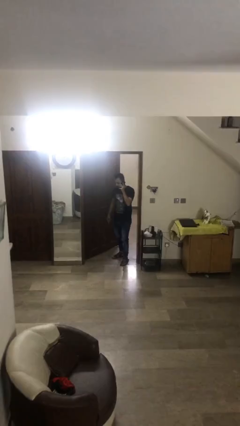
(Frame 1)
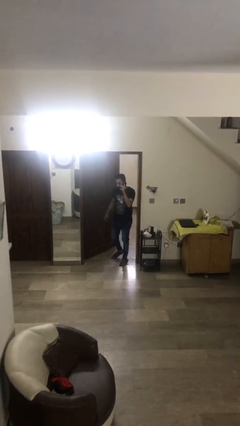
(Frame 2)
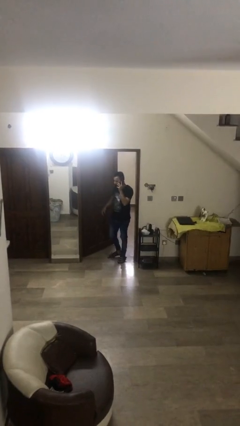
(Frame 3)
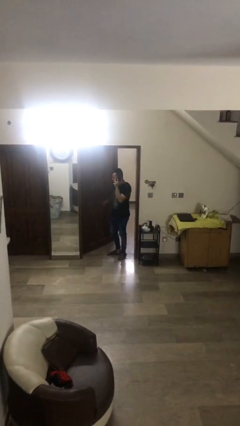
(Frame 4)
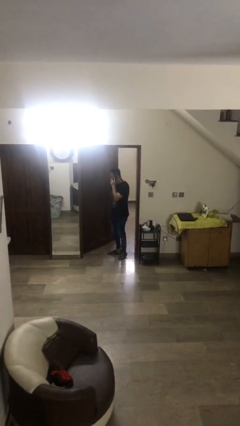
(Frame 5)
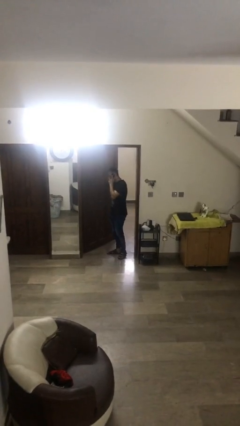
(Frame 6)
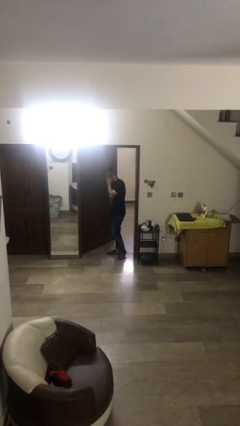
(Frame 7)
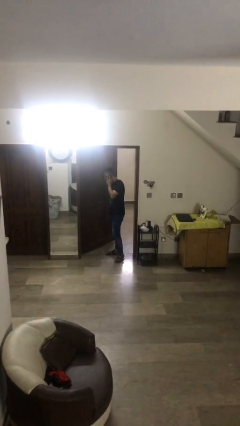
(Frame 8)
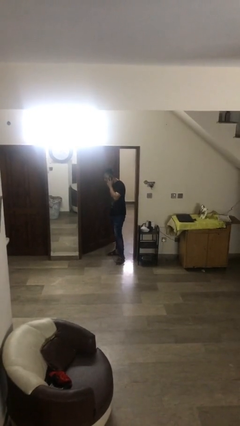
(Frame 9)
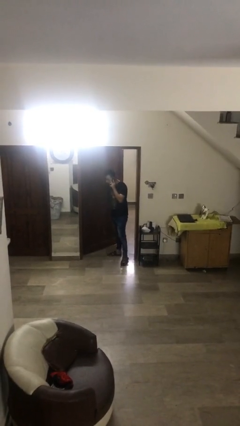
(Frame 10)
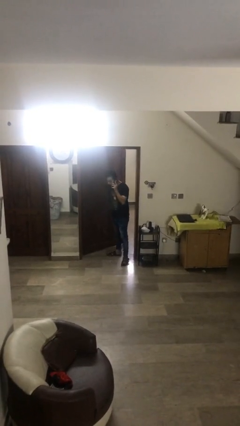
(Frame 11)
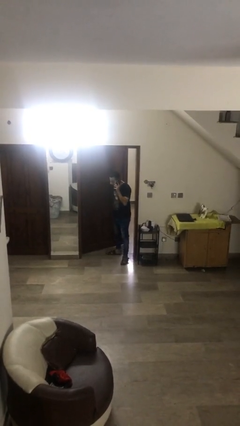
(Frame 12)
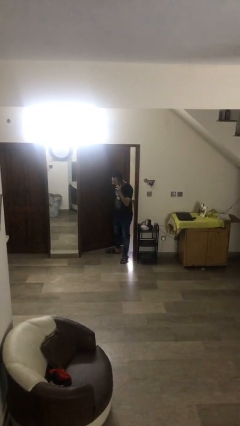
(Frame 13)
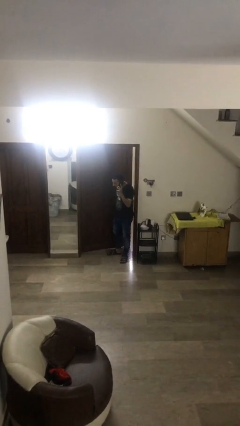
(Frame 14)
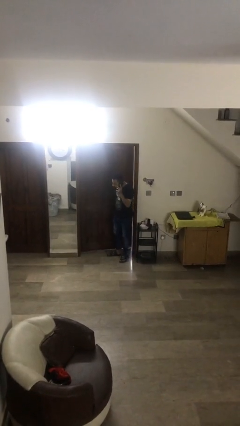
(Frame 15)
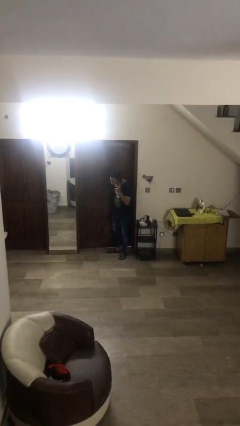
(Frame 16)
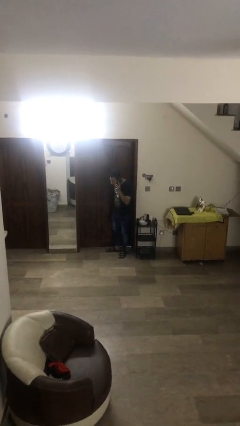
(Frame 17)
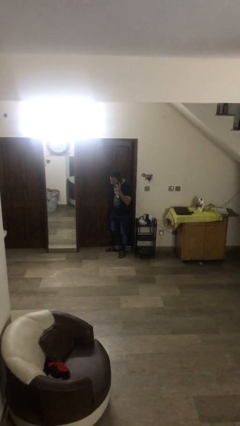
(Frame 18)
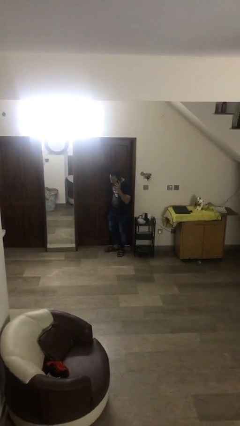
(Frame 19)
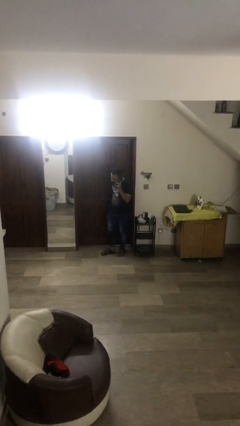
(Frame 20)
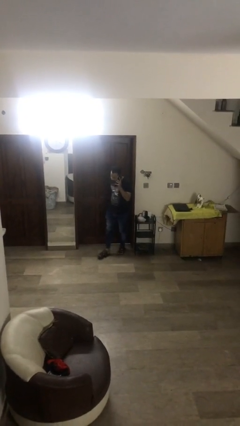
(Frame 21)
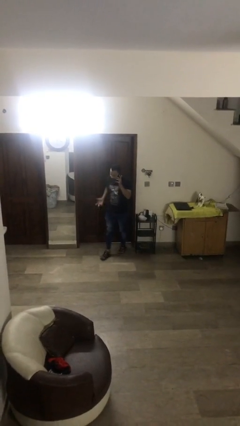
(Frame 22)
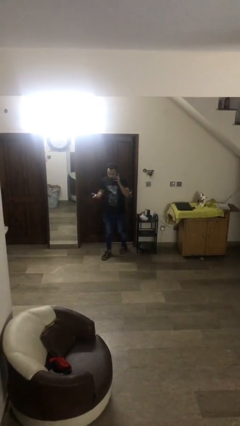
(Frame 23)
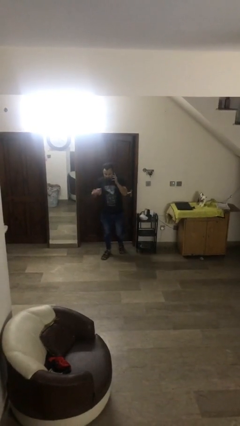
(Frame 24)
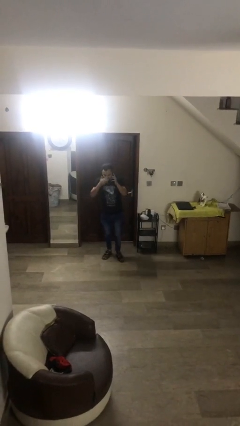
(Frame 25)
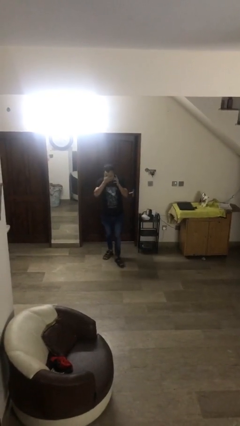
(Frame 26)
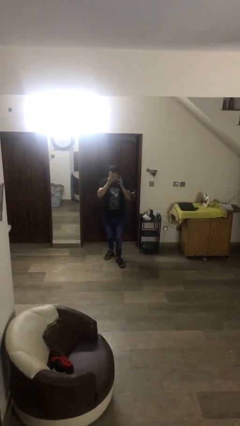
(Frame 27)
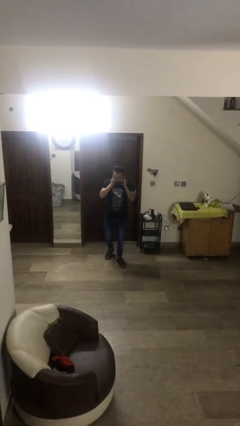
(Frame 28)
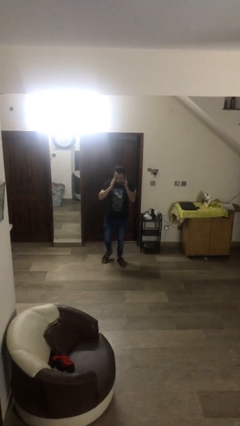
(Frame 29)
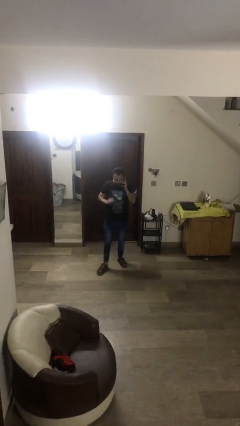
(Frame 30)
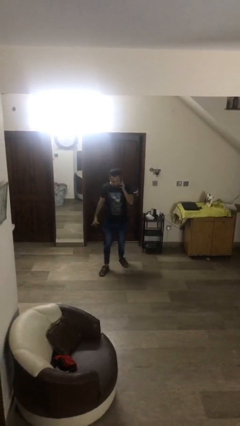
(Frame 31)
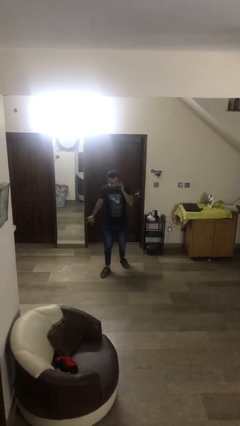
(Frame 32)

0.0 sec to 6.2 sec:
person closes facility door

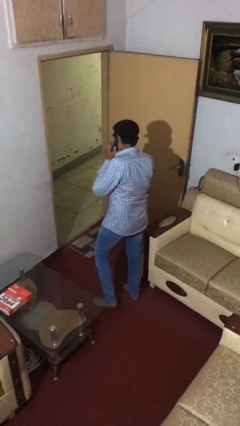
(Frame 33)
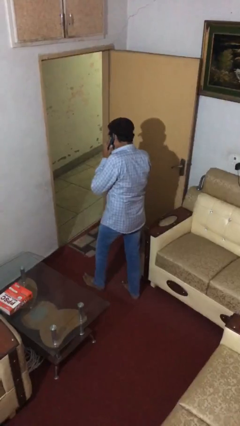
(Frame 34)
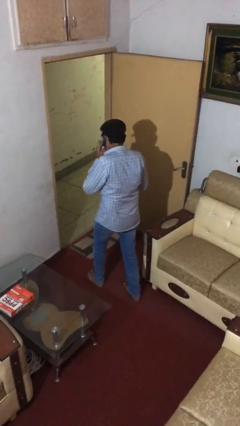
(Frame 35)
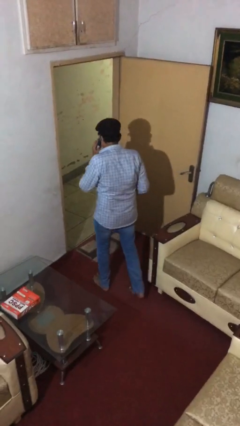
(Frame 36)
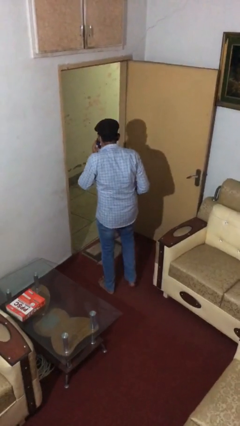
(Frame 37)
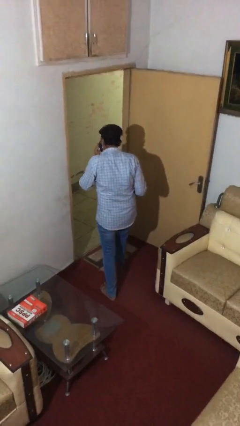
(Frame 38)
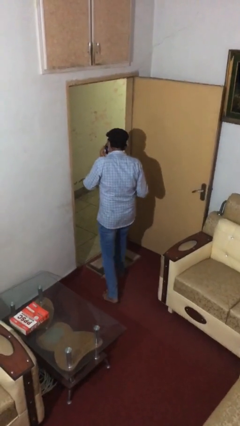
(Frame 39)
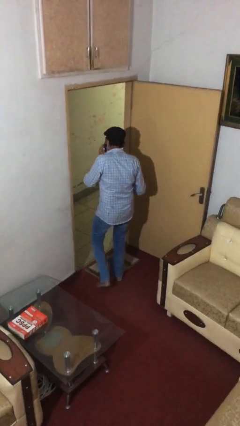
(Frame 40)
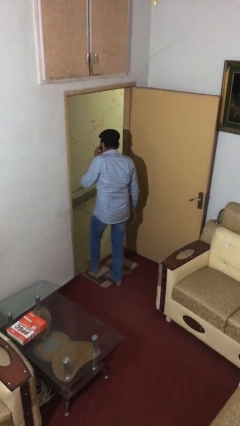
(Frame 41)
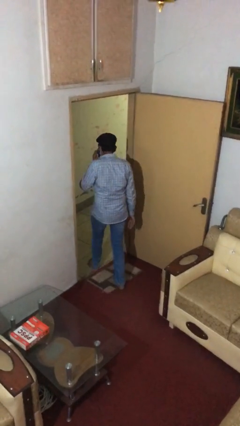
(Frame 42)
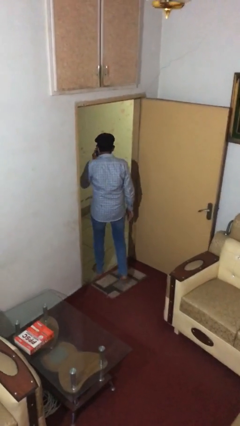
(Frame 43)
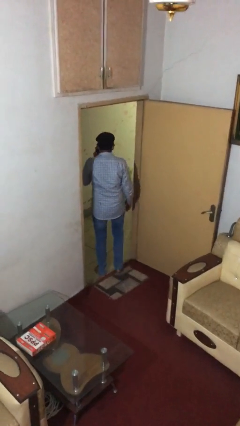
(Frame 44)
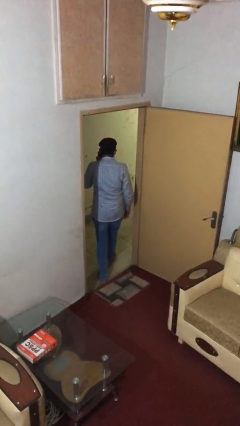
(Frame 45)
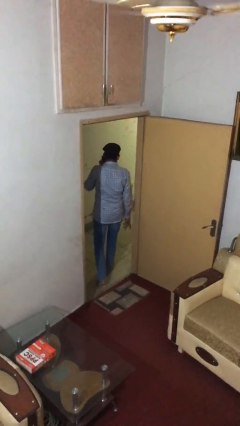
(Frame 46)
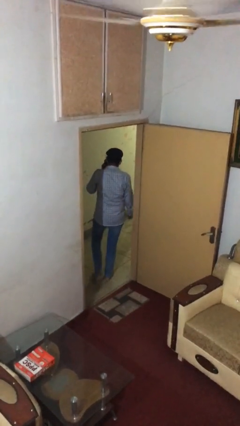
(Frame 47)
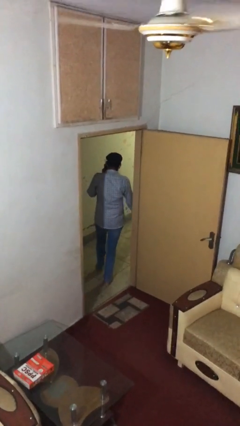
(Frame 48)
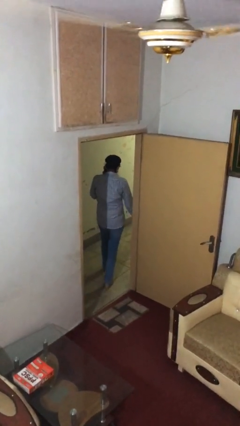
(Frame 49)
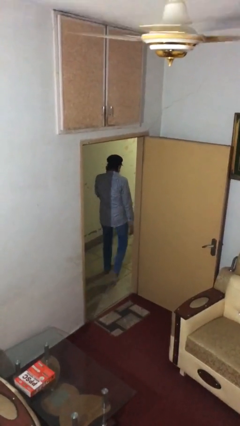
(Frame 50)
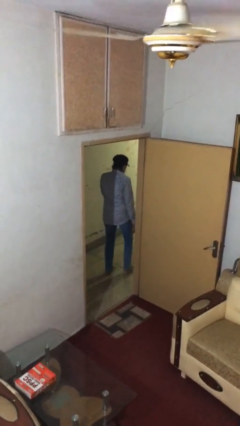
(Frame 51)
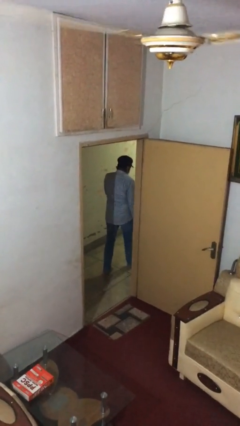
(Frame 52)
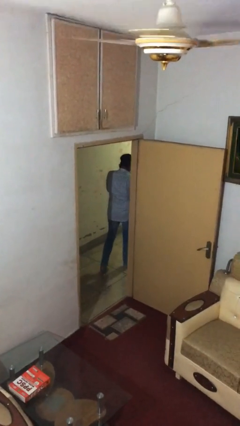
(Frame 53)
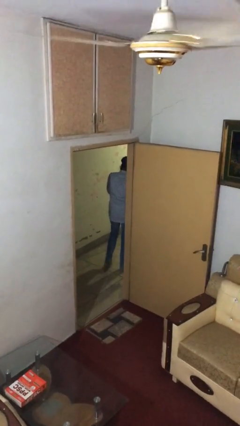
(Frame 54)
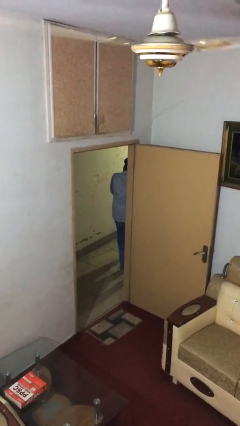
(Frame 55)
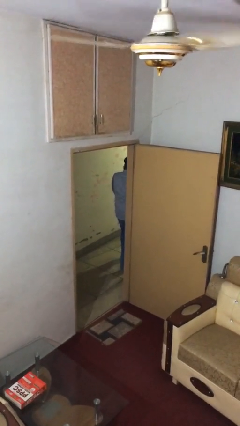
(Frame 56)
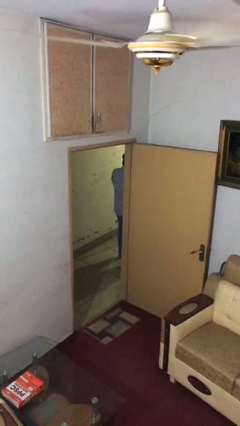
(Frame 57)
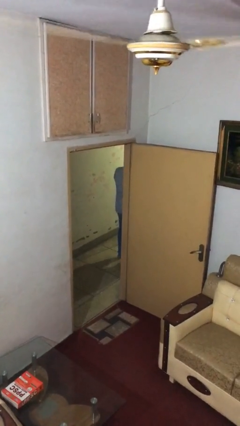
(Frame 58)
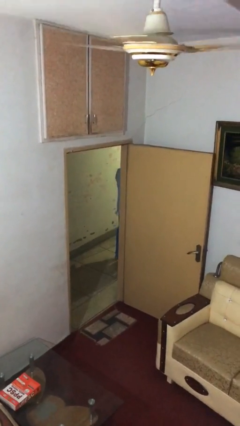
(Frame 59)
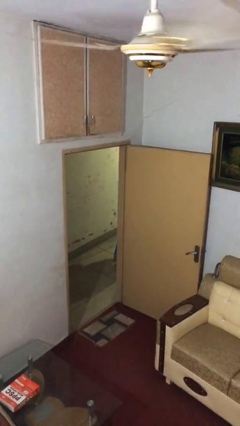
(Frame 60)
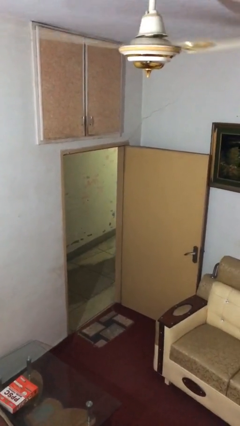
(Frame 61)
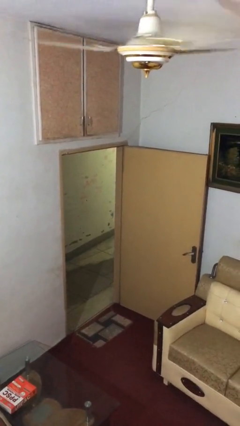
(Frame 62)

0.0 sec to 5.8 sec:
person exits scene through structure

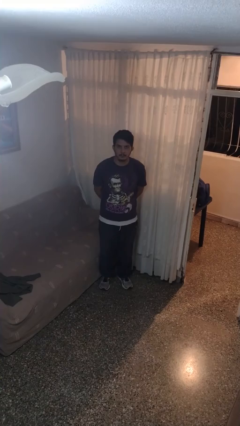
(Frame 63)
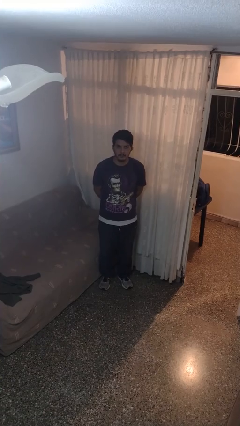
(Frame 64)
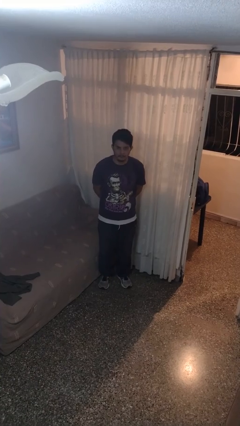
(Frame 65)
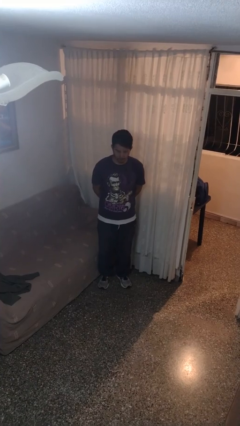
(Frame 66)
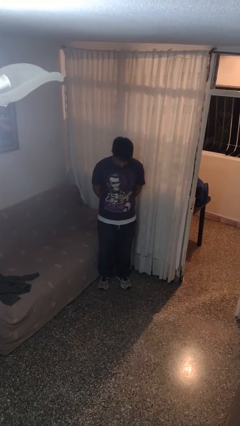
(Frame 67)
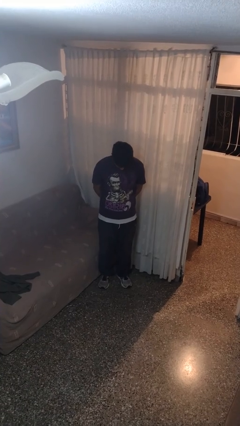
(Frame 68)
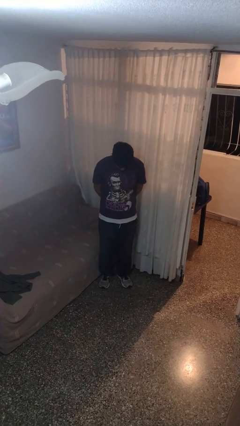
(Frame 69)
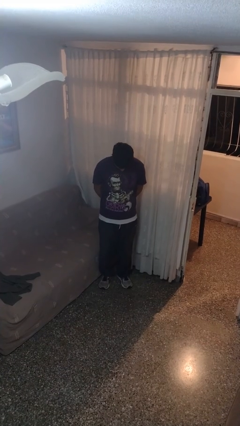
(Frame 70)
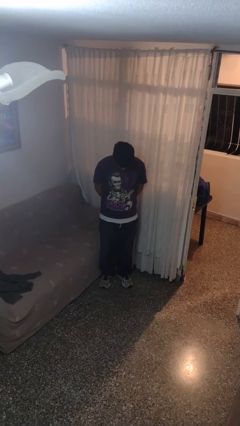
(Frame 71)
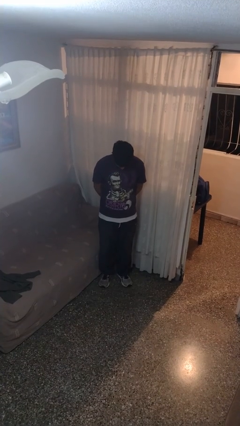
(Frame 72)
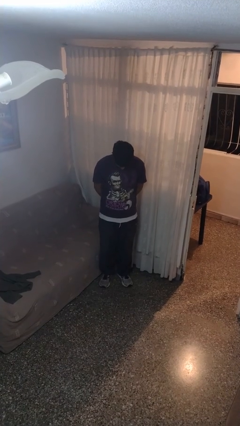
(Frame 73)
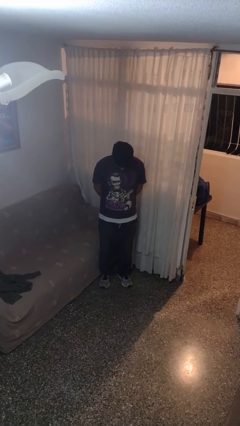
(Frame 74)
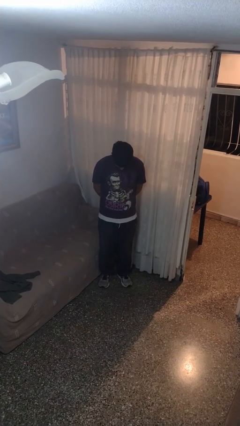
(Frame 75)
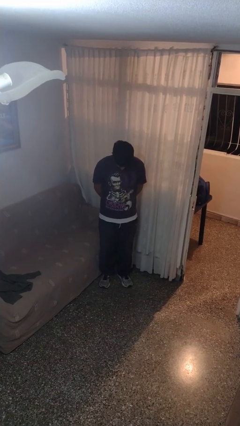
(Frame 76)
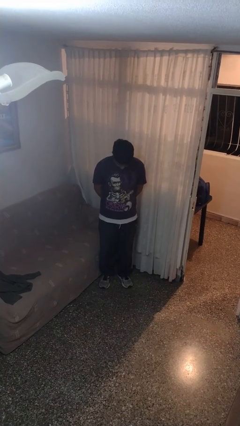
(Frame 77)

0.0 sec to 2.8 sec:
person prays

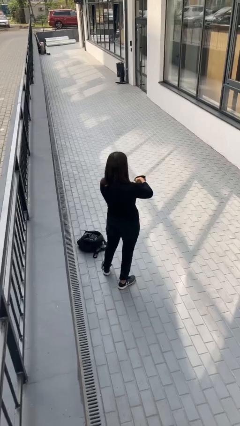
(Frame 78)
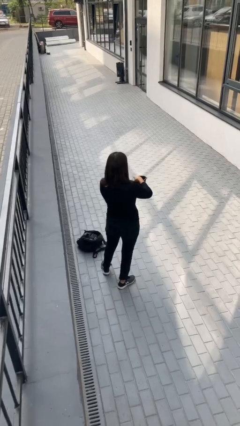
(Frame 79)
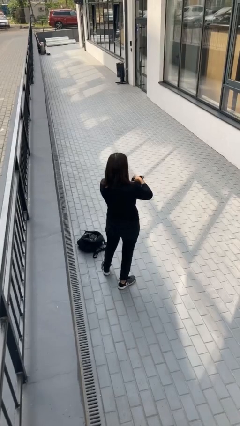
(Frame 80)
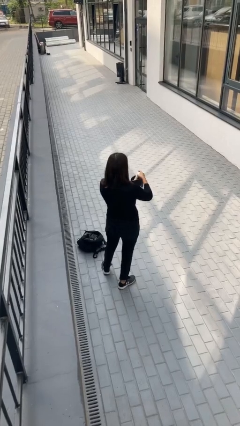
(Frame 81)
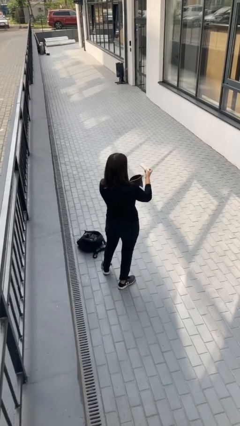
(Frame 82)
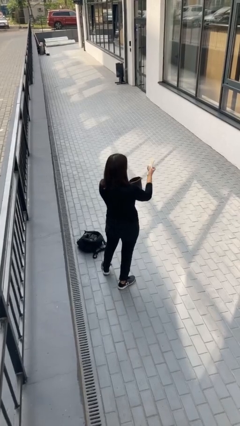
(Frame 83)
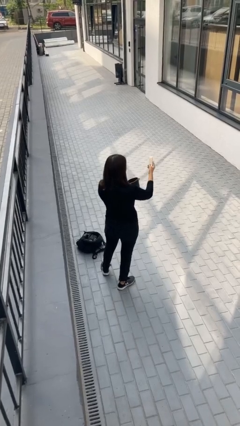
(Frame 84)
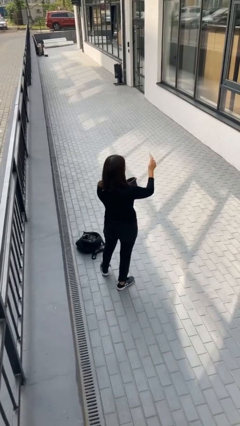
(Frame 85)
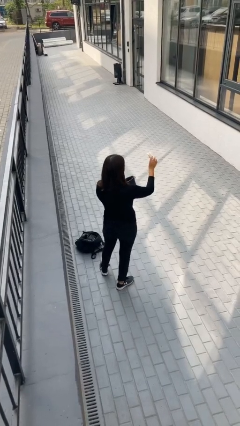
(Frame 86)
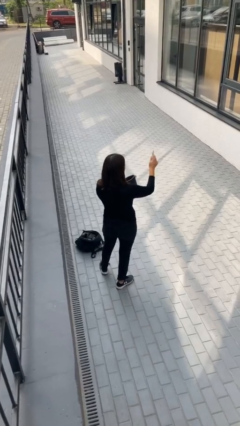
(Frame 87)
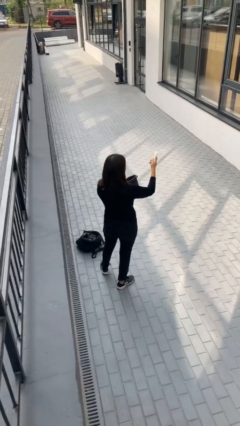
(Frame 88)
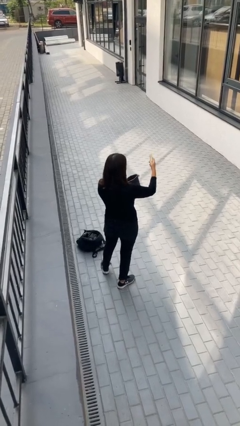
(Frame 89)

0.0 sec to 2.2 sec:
person takes object from purse

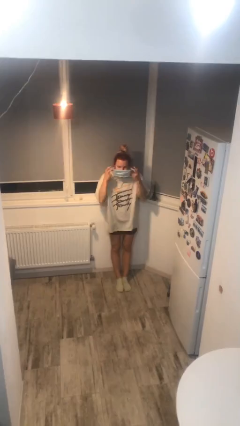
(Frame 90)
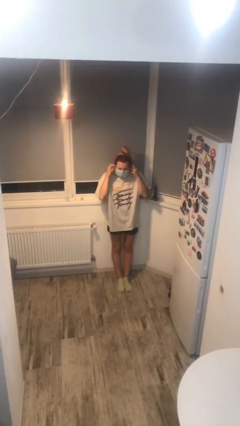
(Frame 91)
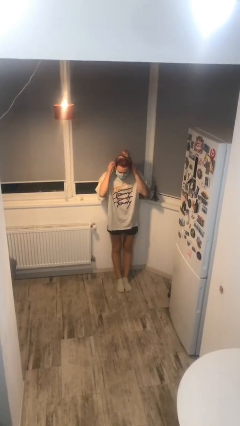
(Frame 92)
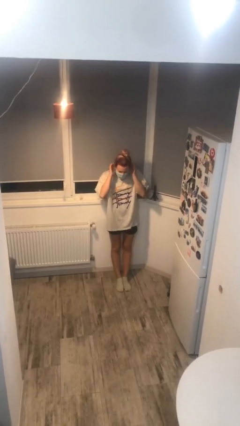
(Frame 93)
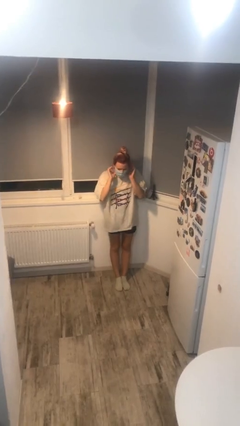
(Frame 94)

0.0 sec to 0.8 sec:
person puts on facemask
